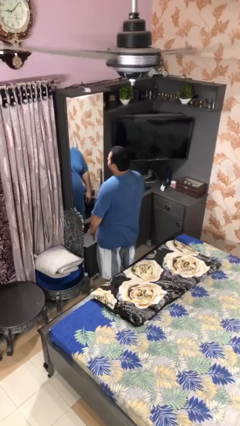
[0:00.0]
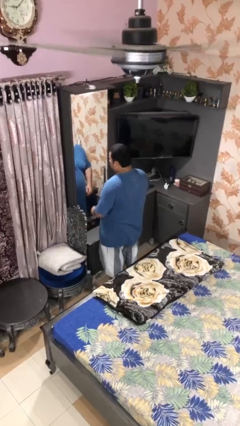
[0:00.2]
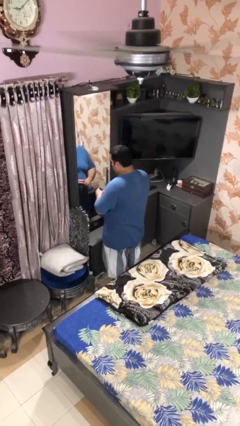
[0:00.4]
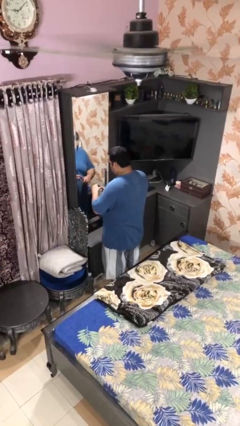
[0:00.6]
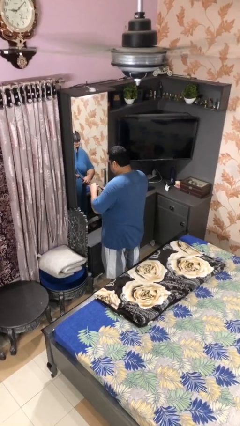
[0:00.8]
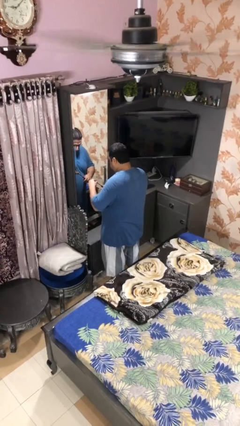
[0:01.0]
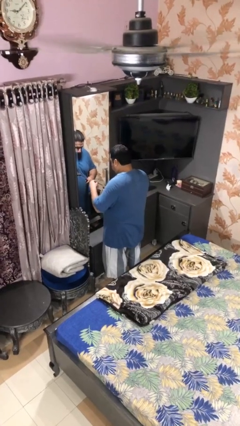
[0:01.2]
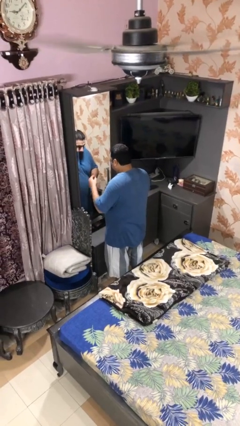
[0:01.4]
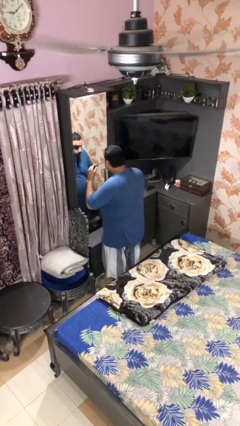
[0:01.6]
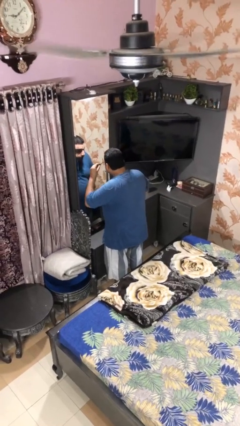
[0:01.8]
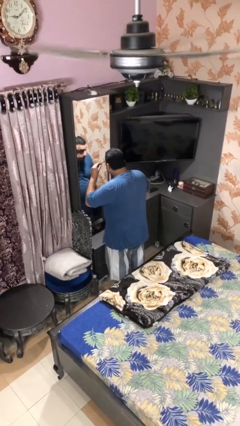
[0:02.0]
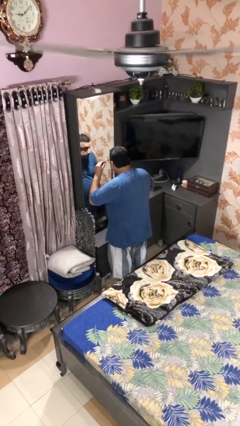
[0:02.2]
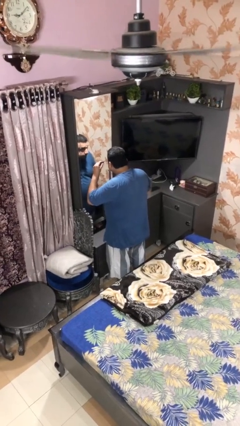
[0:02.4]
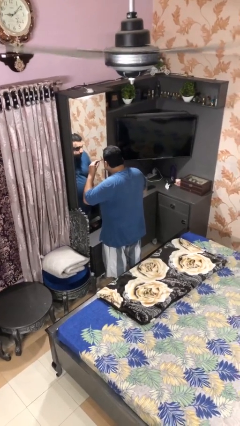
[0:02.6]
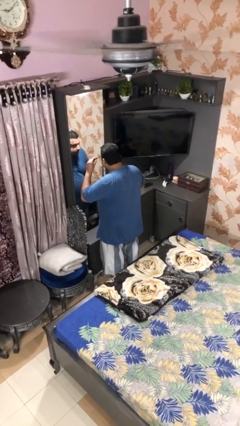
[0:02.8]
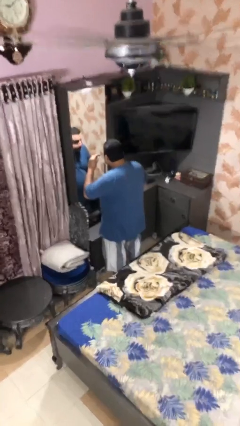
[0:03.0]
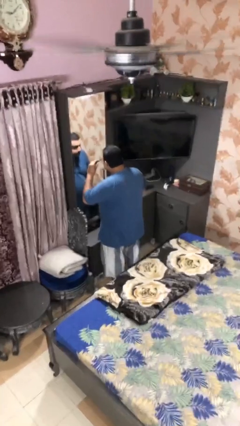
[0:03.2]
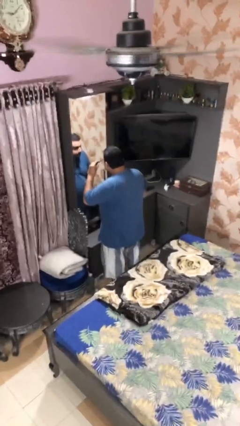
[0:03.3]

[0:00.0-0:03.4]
person applies eye makeup

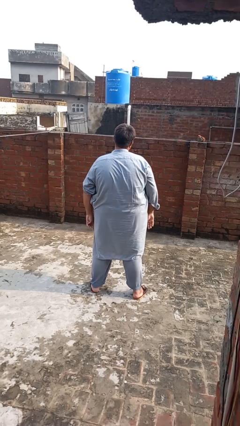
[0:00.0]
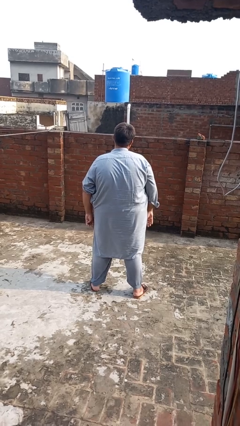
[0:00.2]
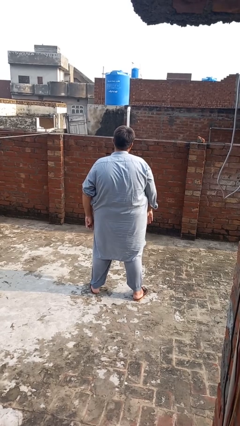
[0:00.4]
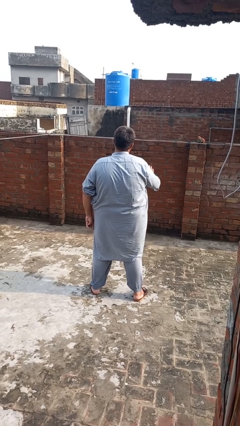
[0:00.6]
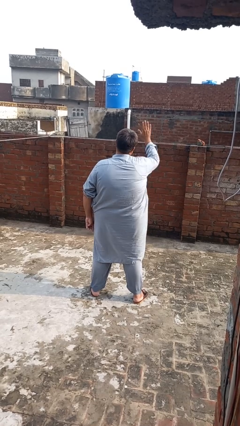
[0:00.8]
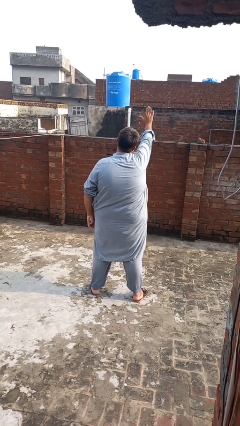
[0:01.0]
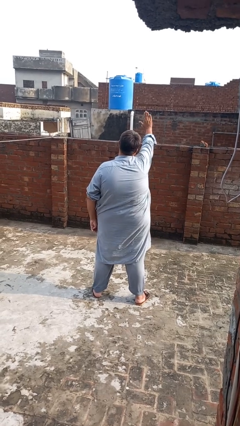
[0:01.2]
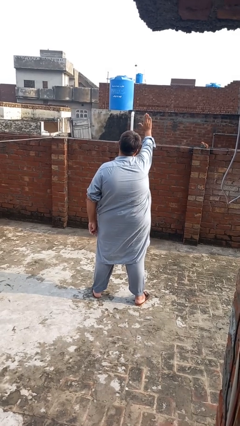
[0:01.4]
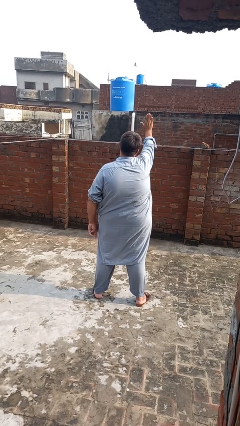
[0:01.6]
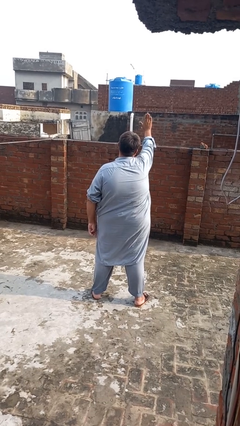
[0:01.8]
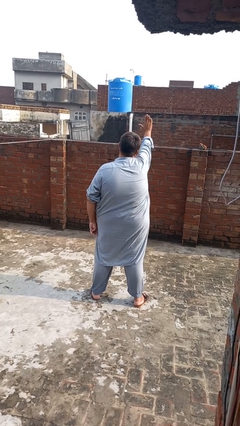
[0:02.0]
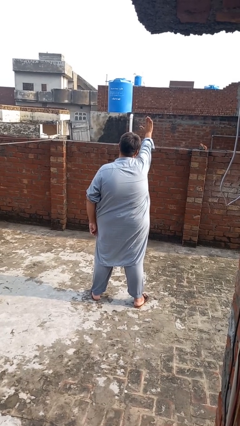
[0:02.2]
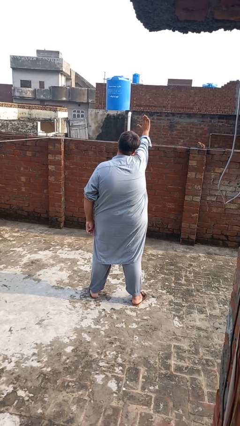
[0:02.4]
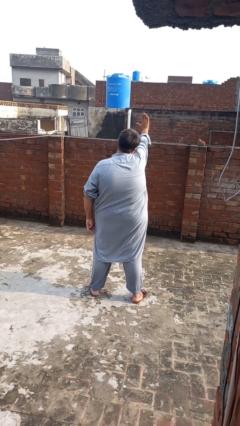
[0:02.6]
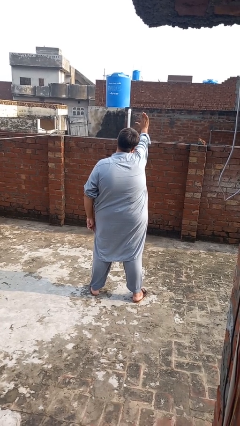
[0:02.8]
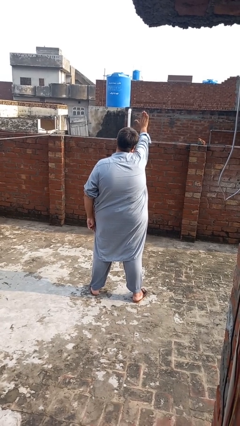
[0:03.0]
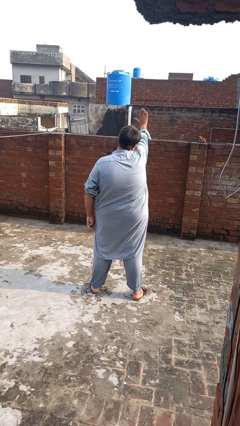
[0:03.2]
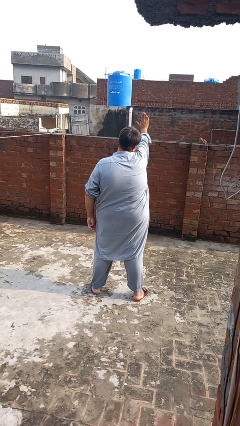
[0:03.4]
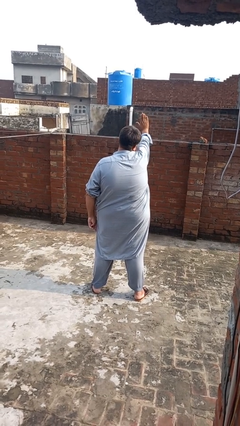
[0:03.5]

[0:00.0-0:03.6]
person gestures stop

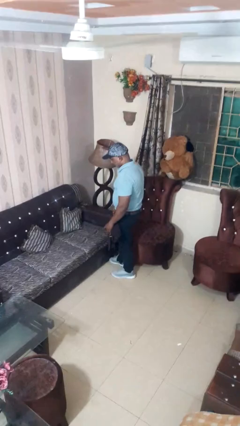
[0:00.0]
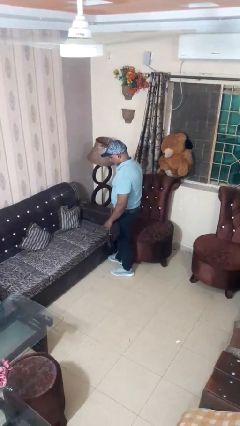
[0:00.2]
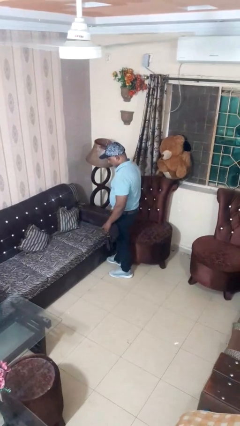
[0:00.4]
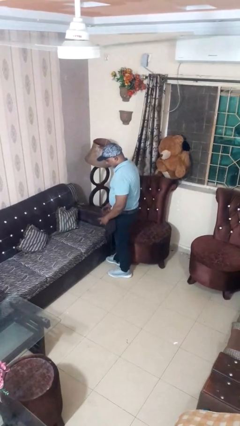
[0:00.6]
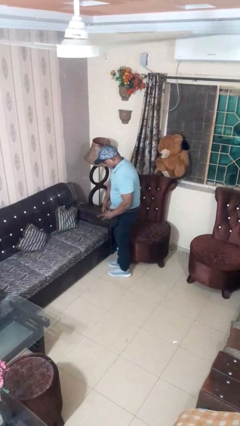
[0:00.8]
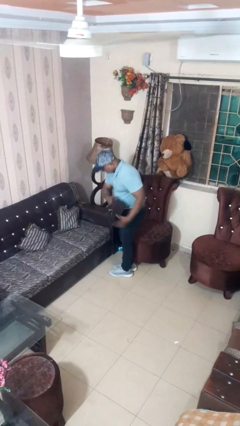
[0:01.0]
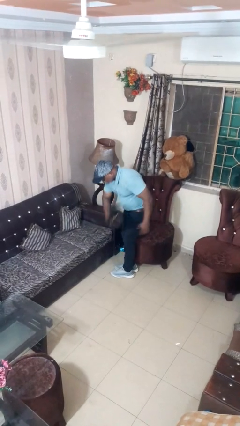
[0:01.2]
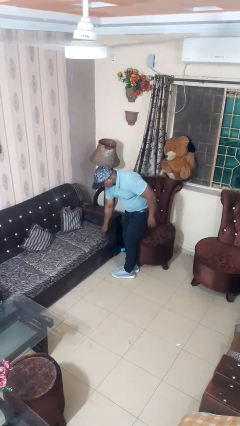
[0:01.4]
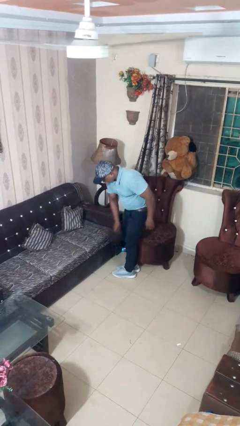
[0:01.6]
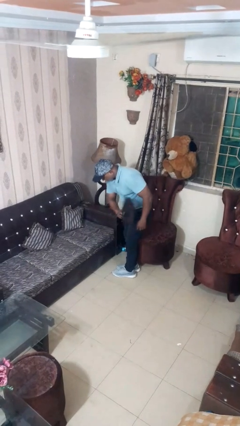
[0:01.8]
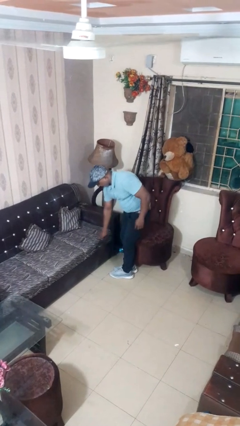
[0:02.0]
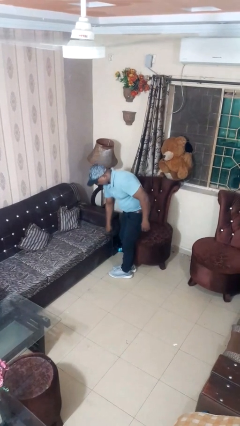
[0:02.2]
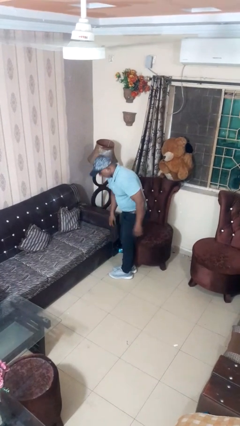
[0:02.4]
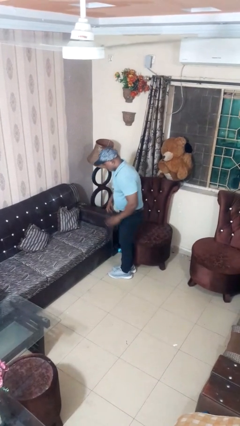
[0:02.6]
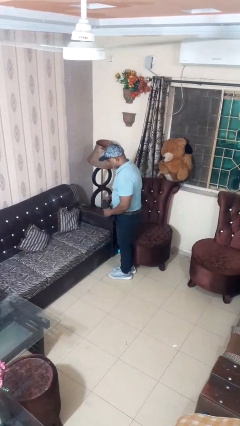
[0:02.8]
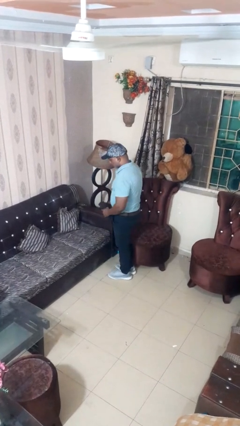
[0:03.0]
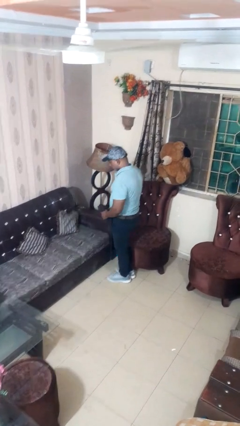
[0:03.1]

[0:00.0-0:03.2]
person dusts furniture

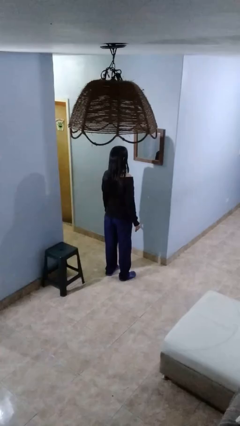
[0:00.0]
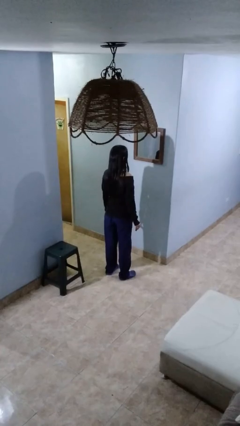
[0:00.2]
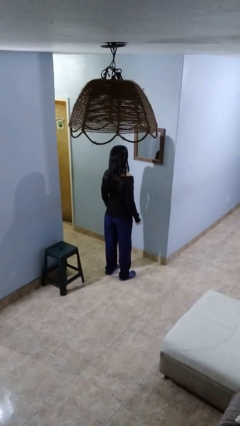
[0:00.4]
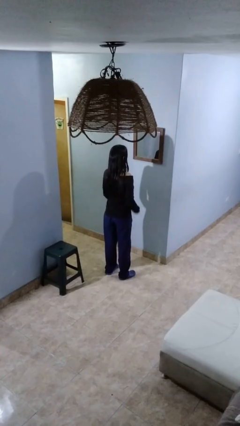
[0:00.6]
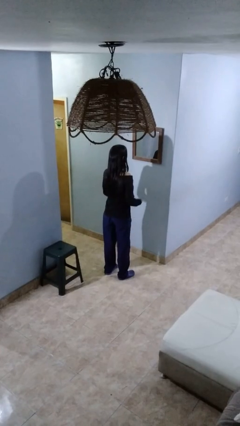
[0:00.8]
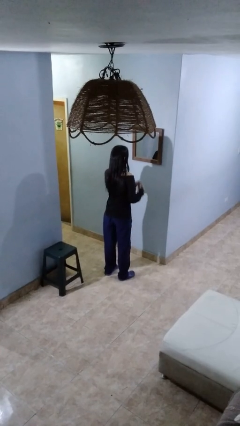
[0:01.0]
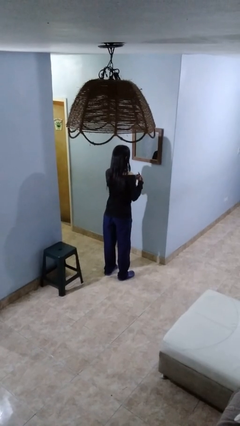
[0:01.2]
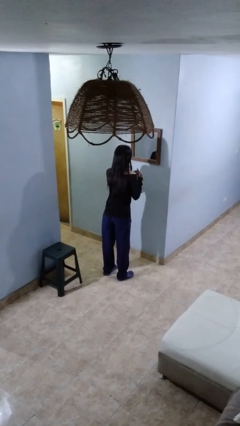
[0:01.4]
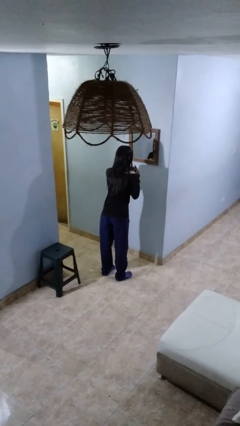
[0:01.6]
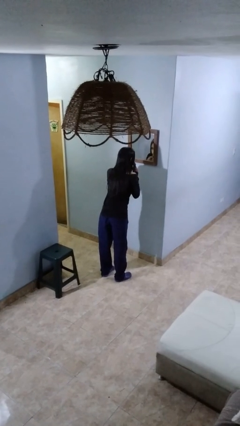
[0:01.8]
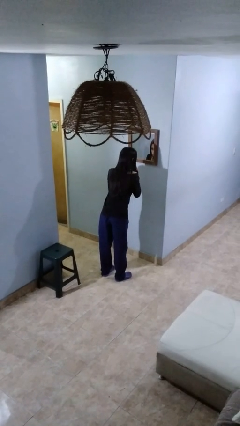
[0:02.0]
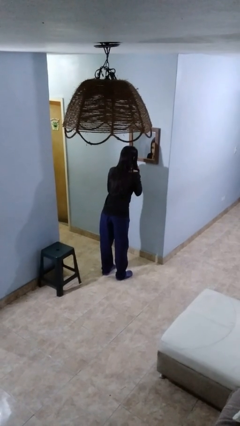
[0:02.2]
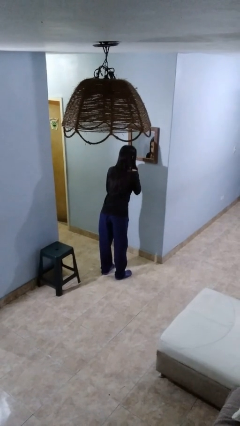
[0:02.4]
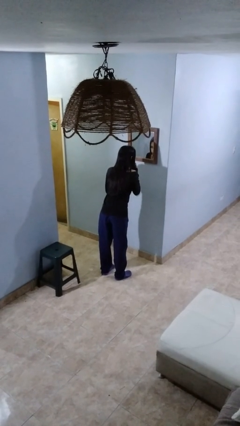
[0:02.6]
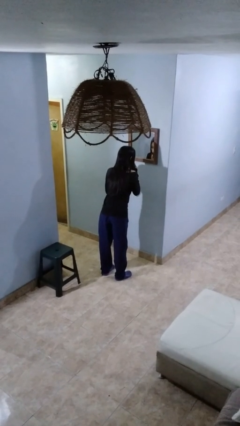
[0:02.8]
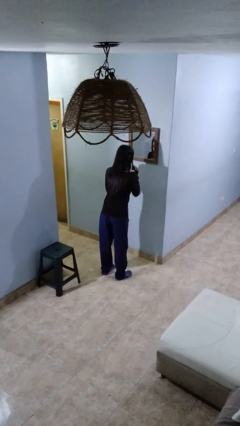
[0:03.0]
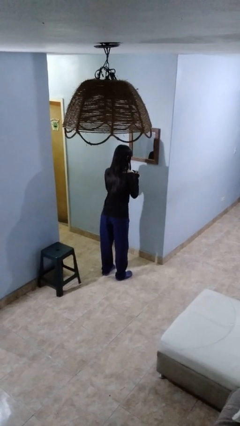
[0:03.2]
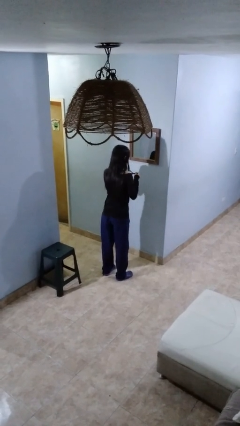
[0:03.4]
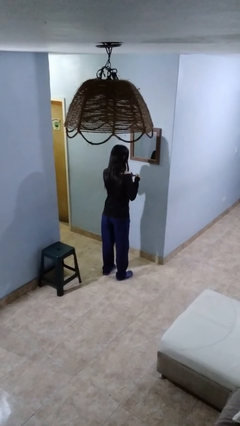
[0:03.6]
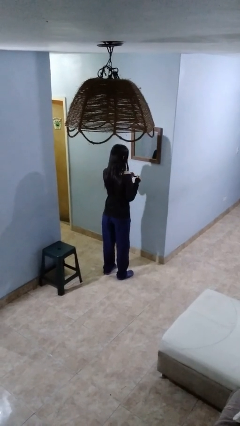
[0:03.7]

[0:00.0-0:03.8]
person applies lip makeup

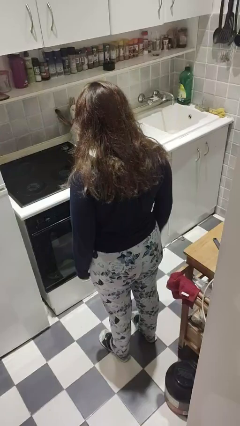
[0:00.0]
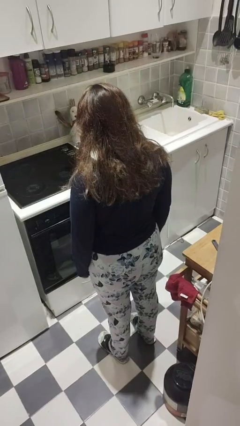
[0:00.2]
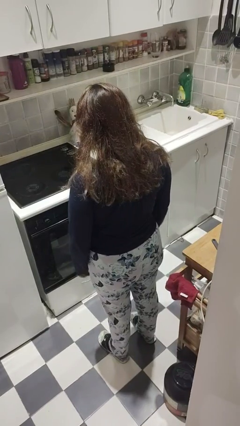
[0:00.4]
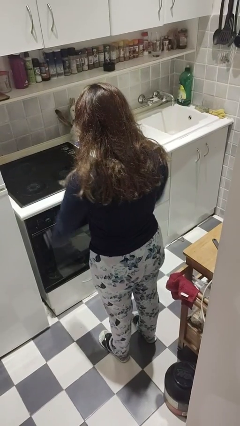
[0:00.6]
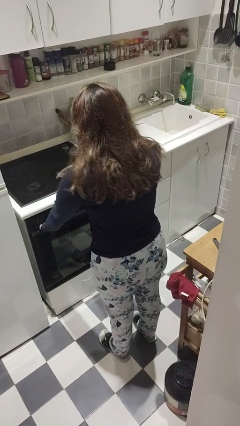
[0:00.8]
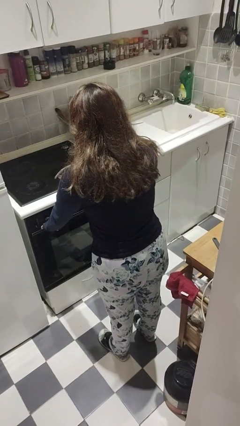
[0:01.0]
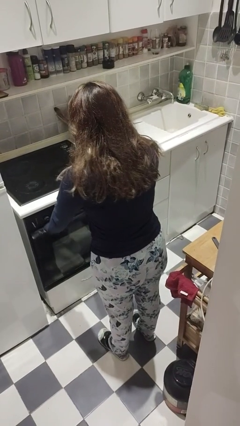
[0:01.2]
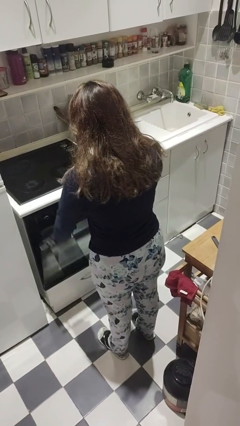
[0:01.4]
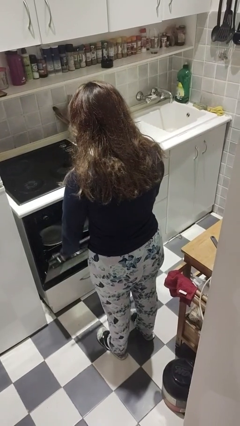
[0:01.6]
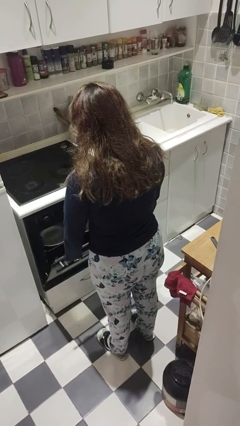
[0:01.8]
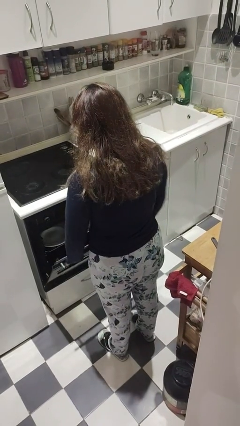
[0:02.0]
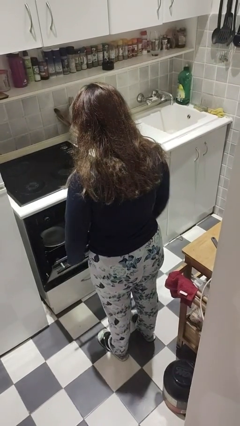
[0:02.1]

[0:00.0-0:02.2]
person opens dishwasher

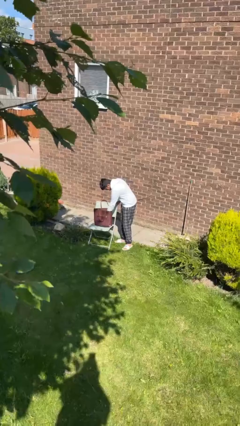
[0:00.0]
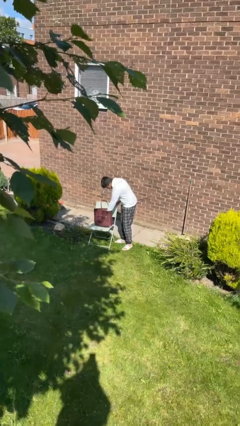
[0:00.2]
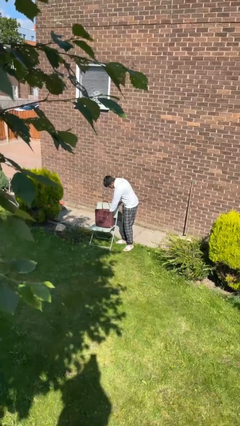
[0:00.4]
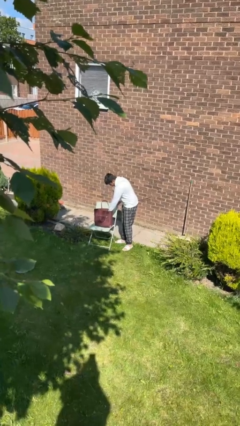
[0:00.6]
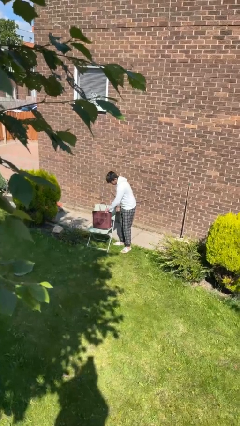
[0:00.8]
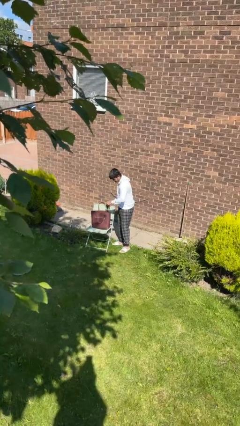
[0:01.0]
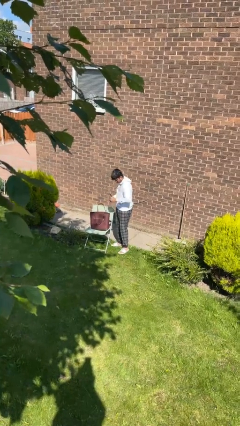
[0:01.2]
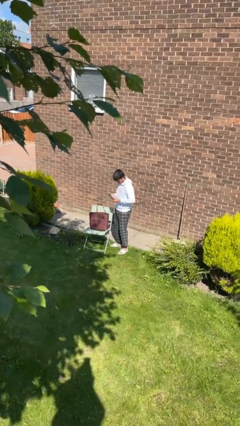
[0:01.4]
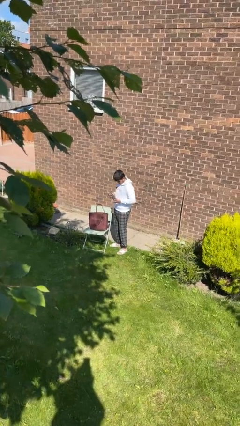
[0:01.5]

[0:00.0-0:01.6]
person takes object from purse
